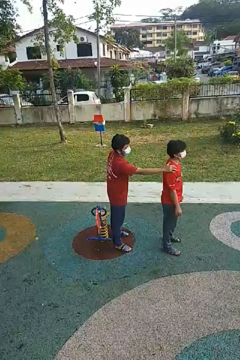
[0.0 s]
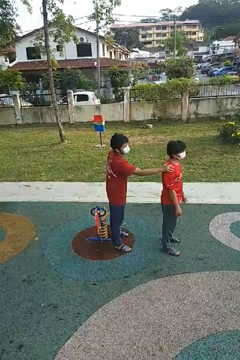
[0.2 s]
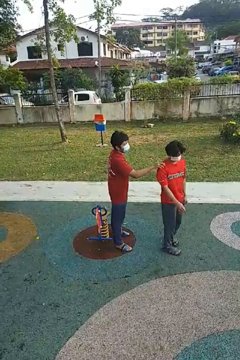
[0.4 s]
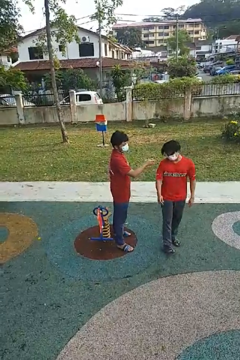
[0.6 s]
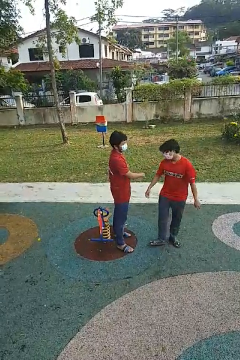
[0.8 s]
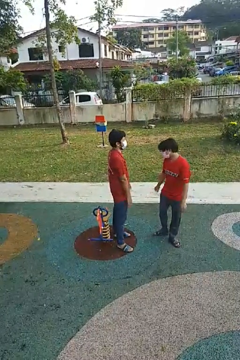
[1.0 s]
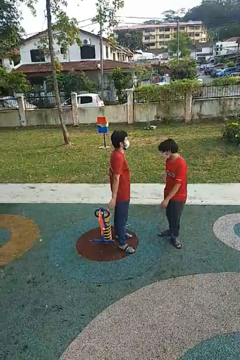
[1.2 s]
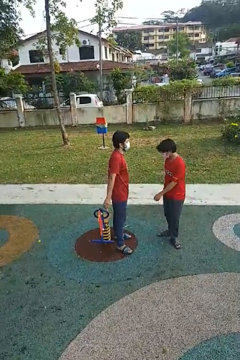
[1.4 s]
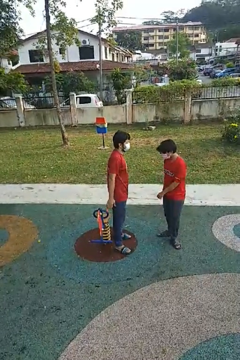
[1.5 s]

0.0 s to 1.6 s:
person spins person around

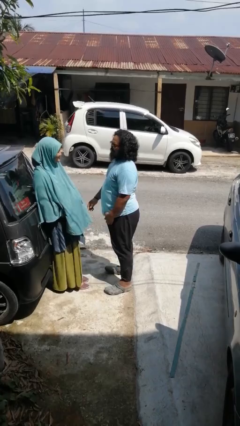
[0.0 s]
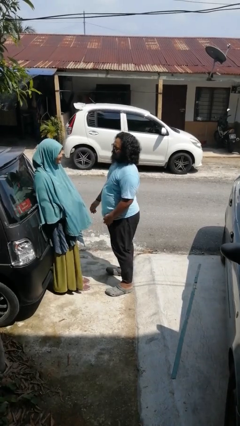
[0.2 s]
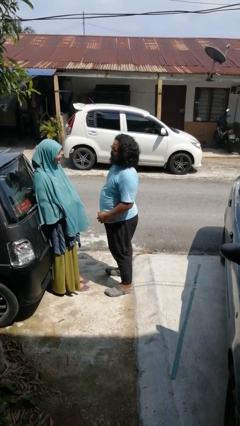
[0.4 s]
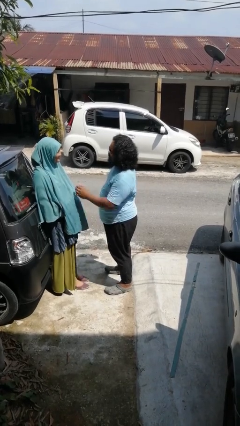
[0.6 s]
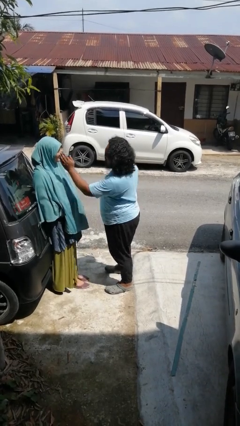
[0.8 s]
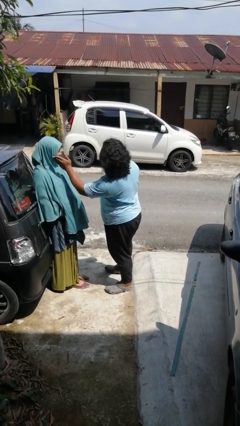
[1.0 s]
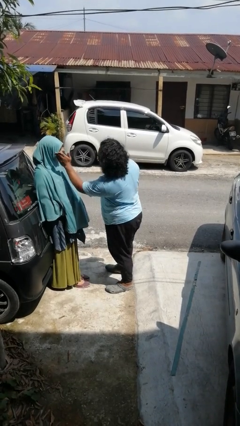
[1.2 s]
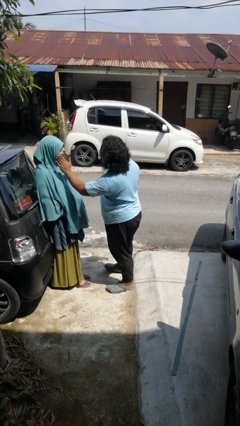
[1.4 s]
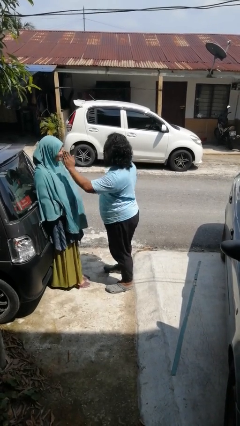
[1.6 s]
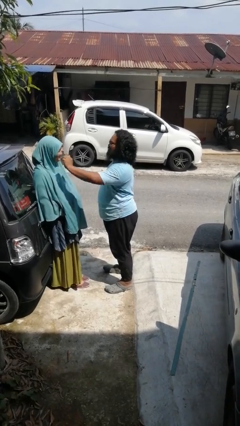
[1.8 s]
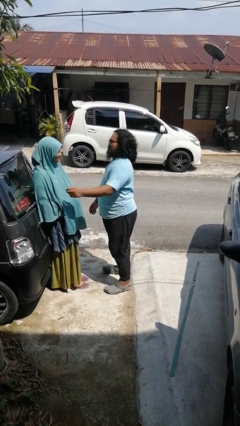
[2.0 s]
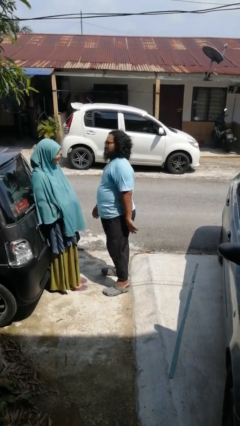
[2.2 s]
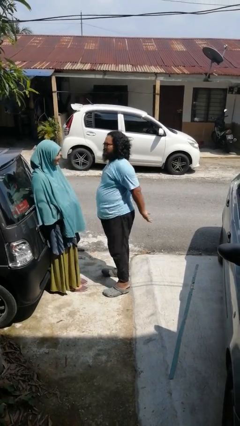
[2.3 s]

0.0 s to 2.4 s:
person touches face of person

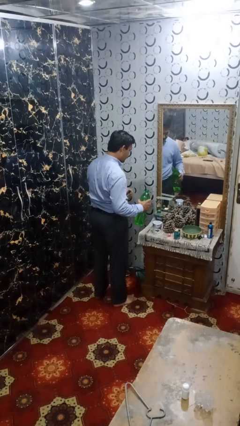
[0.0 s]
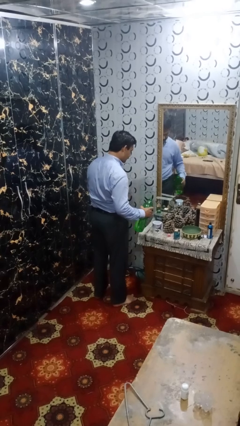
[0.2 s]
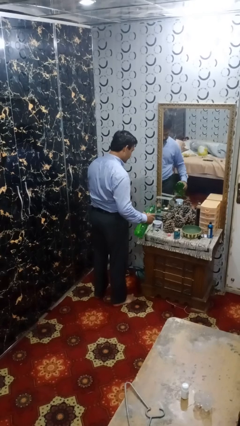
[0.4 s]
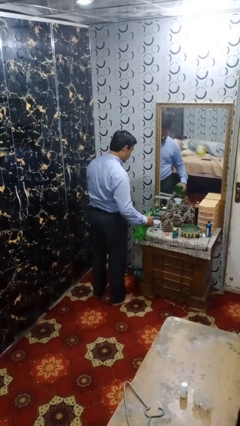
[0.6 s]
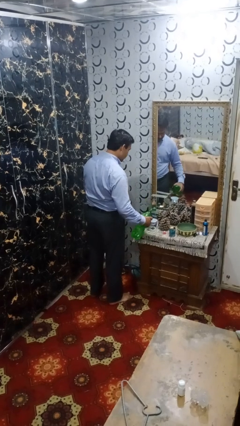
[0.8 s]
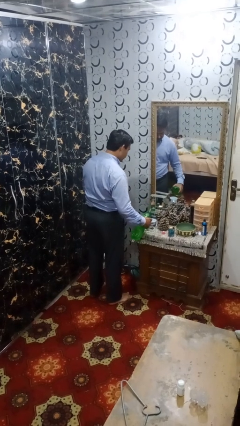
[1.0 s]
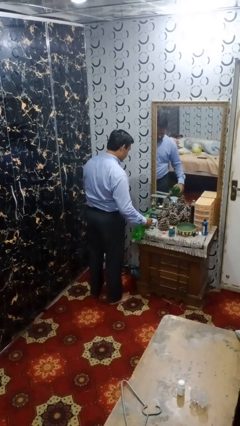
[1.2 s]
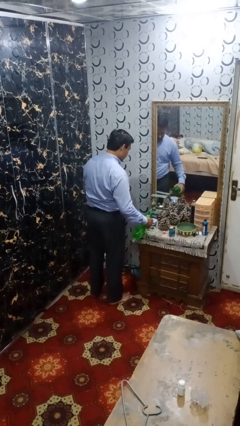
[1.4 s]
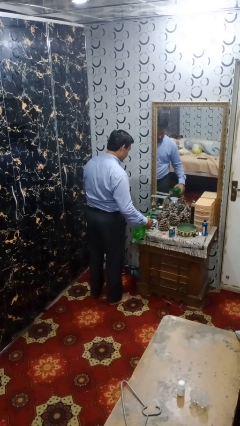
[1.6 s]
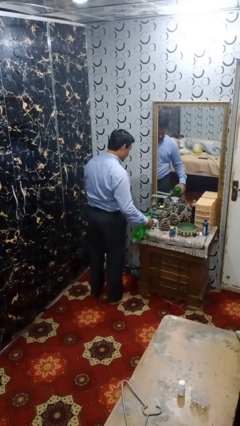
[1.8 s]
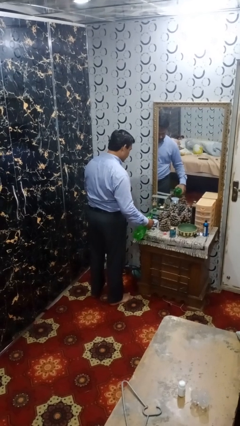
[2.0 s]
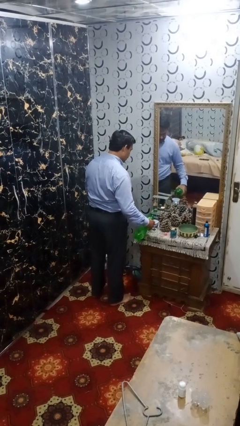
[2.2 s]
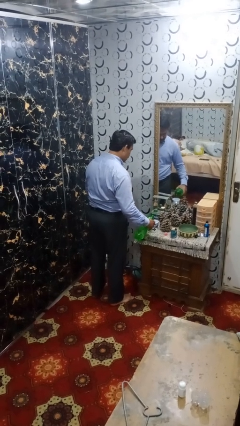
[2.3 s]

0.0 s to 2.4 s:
person pours liquid into cup

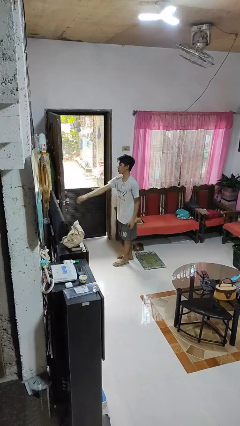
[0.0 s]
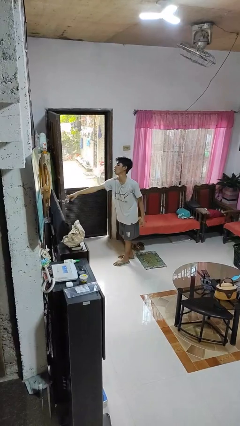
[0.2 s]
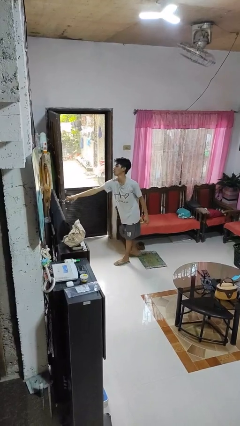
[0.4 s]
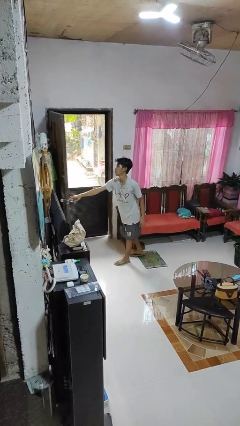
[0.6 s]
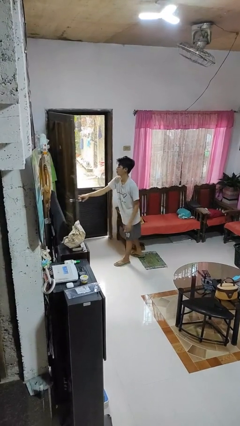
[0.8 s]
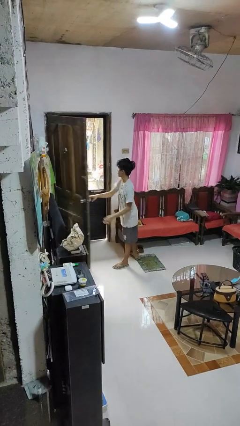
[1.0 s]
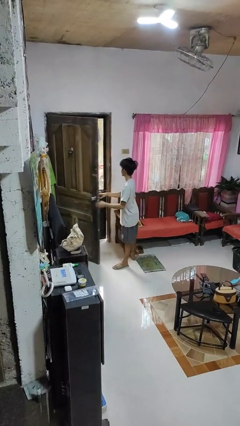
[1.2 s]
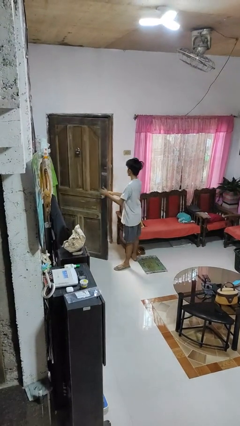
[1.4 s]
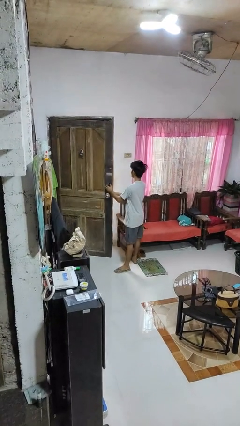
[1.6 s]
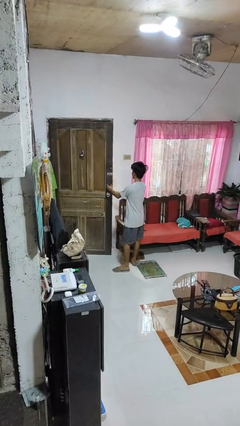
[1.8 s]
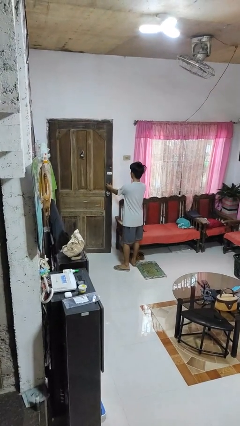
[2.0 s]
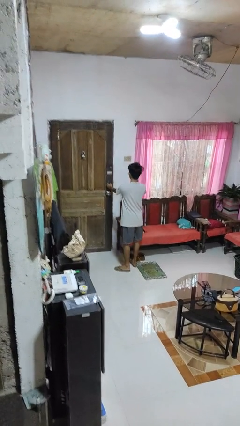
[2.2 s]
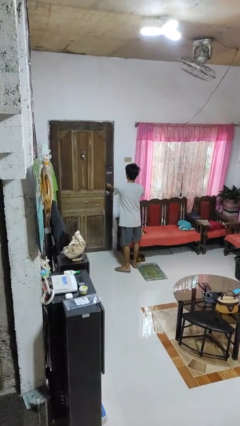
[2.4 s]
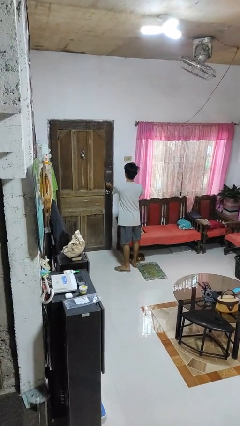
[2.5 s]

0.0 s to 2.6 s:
person closes facility door

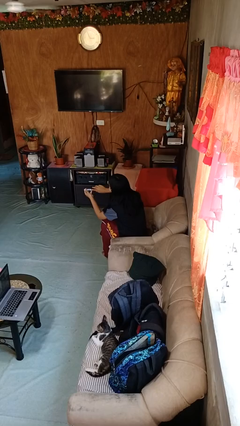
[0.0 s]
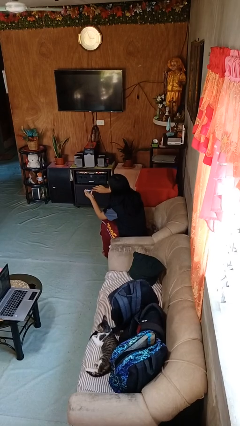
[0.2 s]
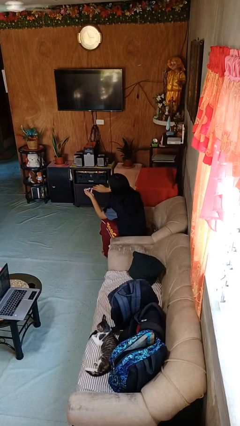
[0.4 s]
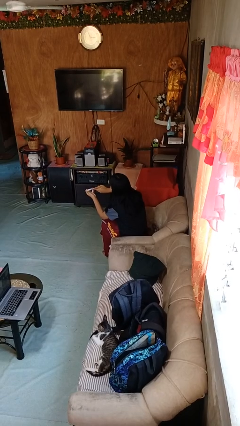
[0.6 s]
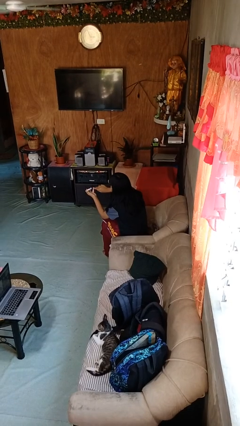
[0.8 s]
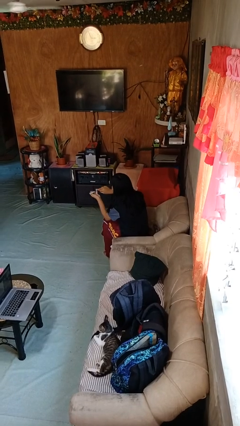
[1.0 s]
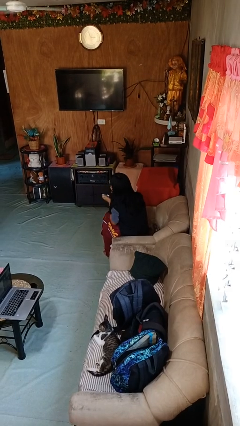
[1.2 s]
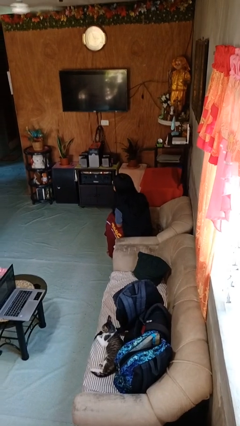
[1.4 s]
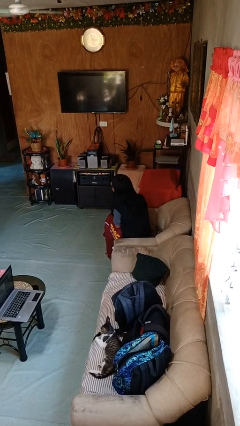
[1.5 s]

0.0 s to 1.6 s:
person clips fingernails

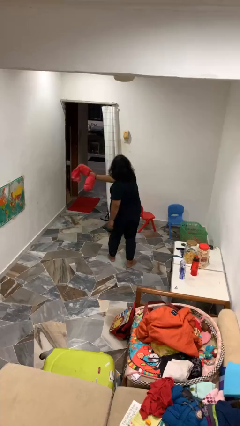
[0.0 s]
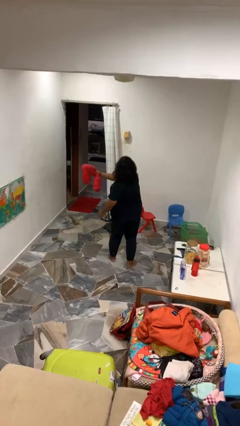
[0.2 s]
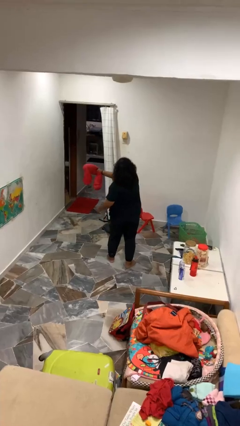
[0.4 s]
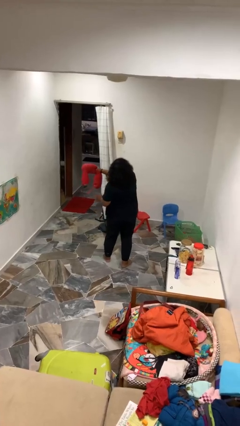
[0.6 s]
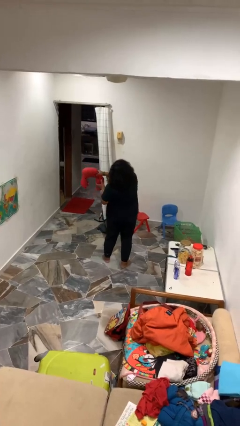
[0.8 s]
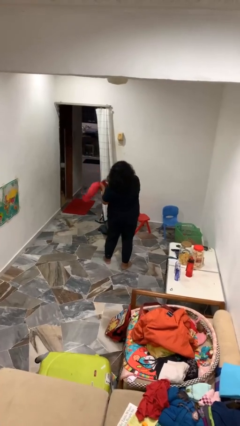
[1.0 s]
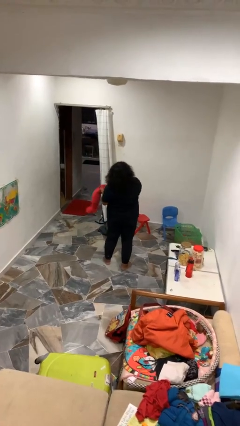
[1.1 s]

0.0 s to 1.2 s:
person catches dropped object

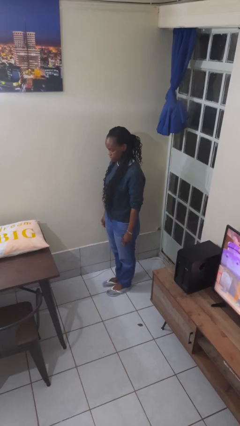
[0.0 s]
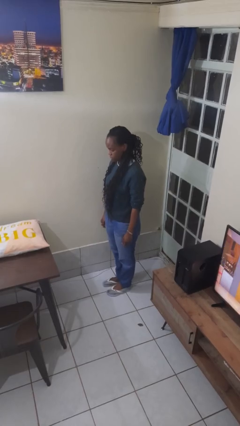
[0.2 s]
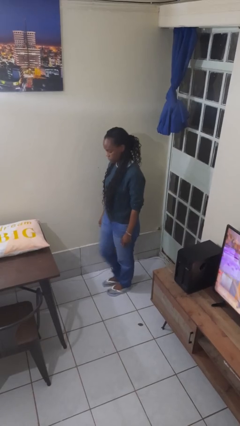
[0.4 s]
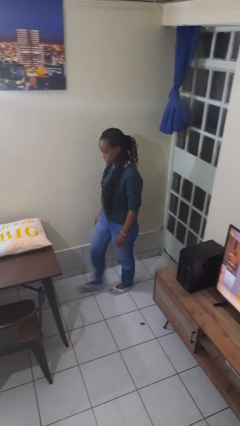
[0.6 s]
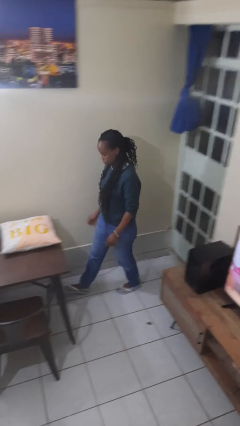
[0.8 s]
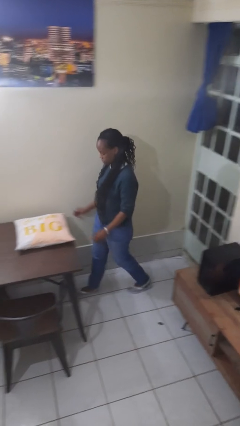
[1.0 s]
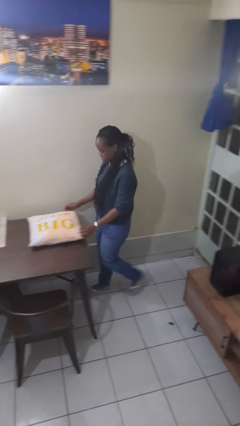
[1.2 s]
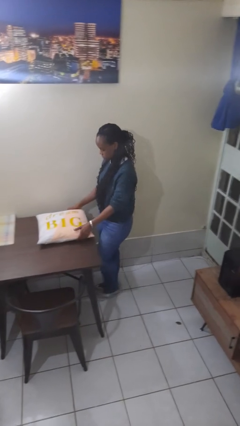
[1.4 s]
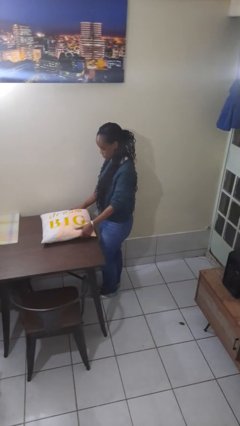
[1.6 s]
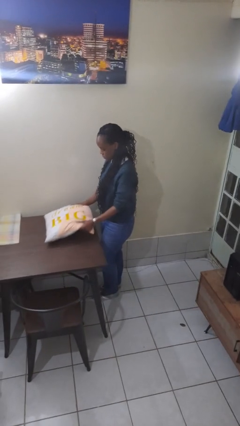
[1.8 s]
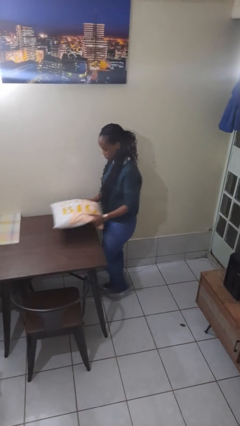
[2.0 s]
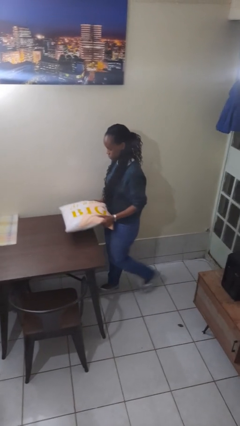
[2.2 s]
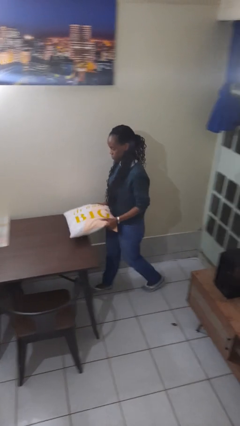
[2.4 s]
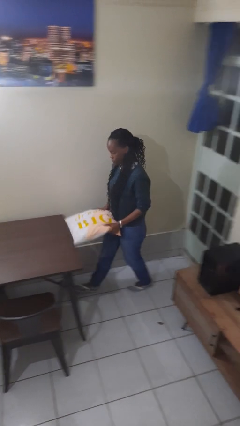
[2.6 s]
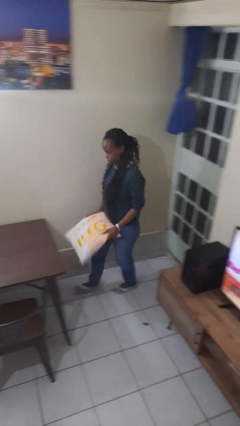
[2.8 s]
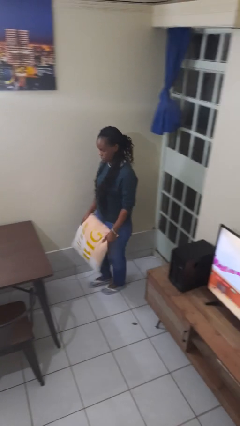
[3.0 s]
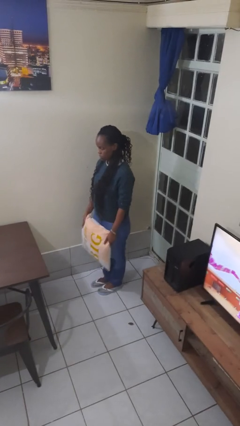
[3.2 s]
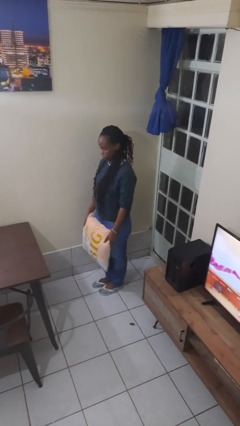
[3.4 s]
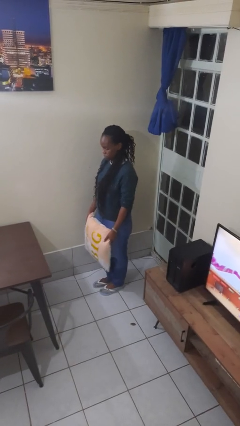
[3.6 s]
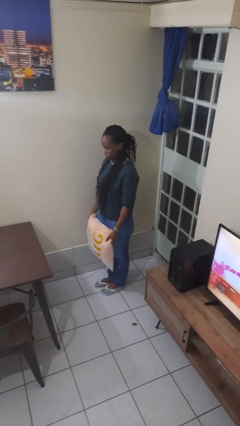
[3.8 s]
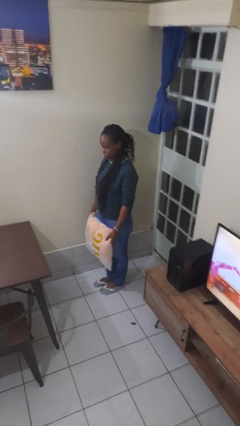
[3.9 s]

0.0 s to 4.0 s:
person picks up object from table

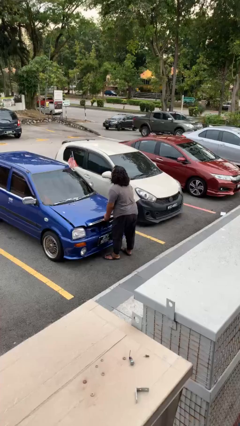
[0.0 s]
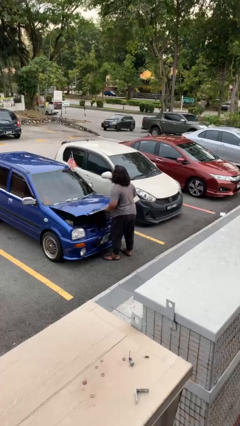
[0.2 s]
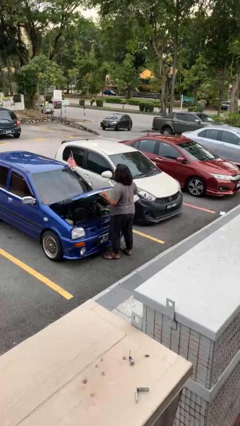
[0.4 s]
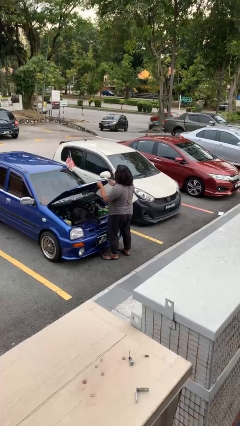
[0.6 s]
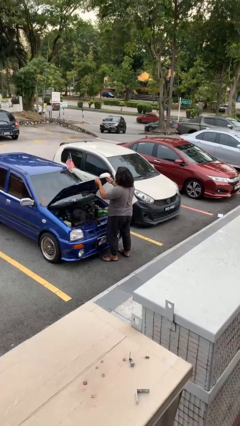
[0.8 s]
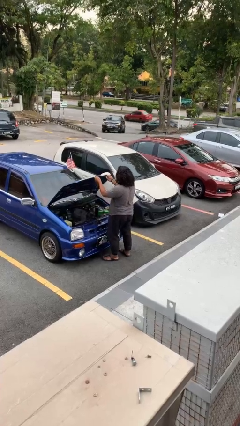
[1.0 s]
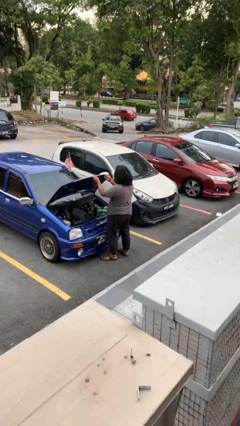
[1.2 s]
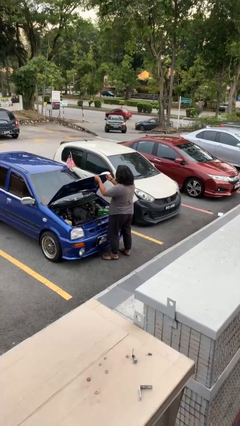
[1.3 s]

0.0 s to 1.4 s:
person opens car hood
